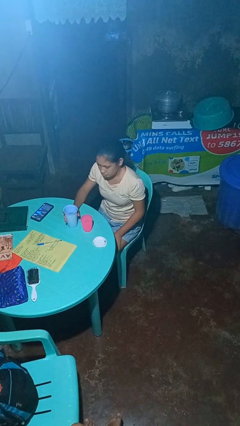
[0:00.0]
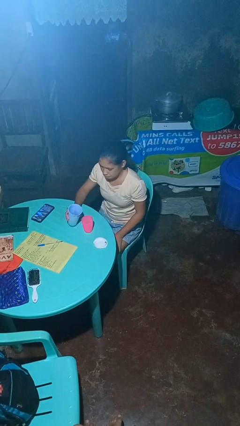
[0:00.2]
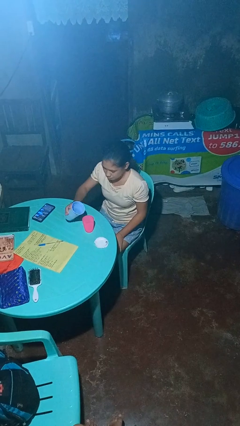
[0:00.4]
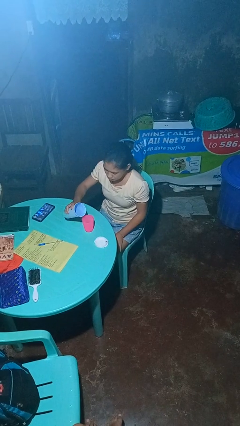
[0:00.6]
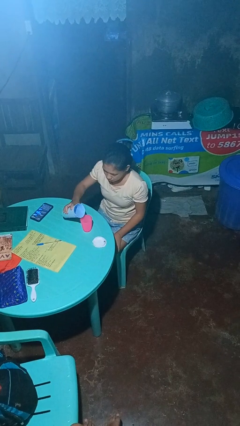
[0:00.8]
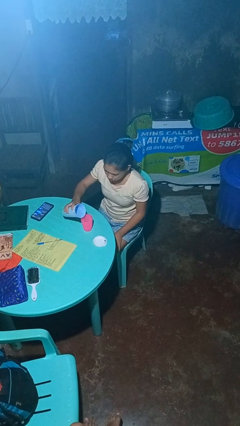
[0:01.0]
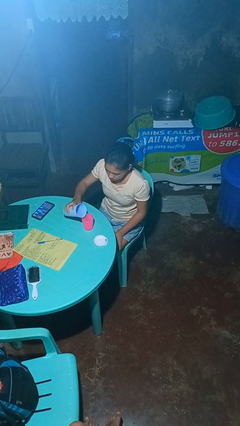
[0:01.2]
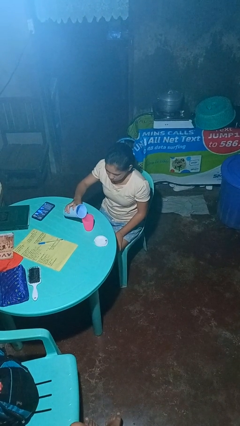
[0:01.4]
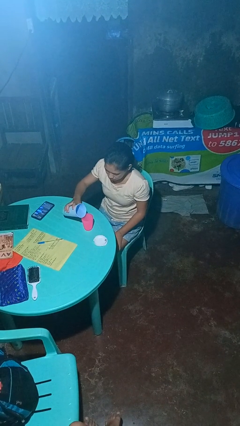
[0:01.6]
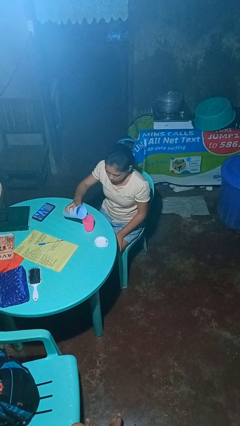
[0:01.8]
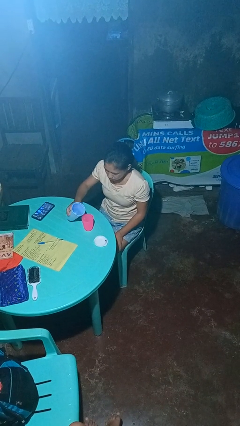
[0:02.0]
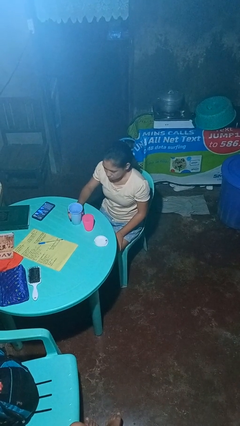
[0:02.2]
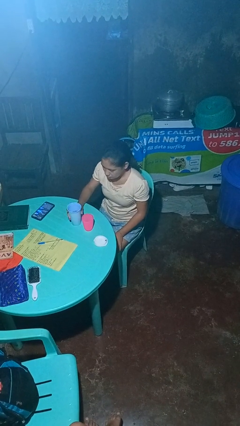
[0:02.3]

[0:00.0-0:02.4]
person pours liquid into cup

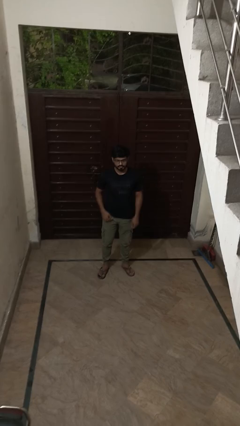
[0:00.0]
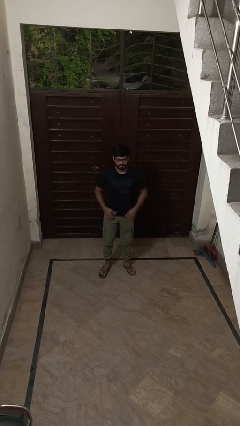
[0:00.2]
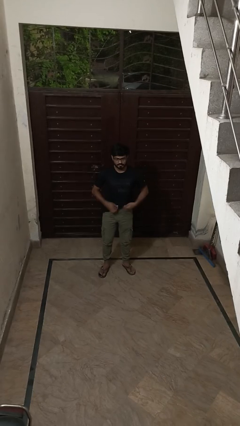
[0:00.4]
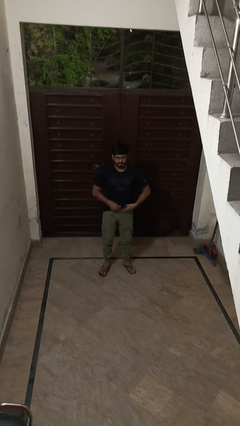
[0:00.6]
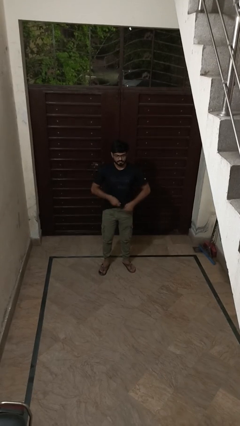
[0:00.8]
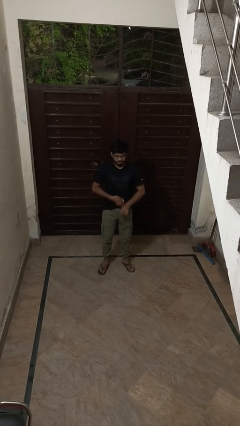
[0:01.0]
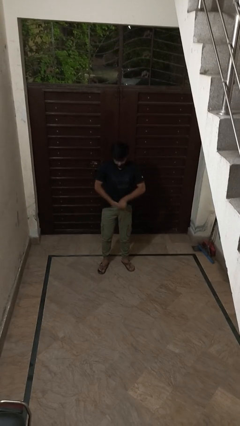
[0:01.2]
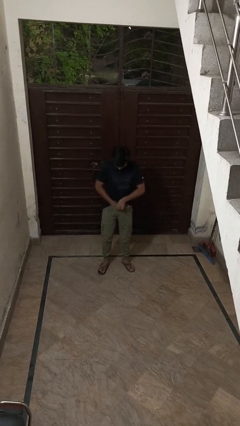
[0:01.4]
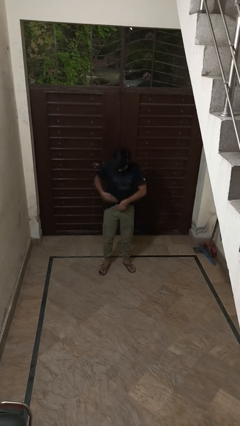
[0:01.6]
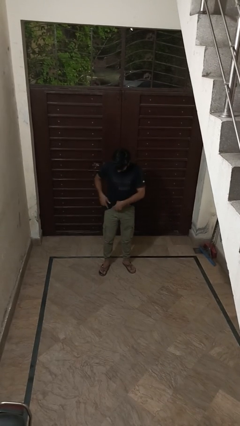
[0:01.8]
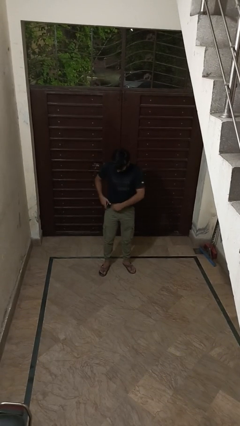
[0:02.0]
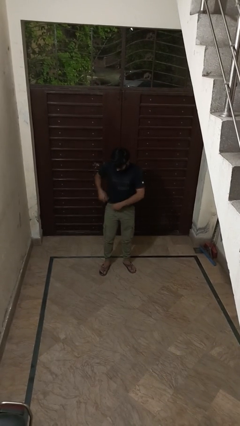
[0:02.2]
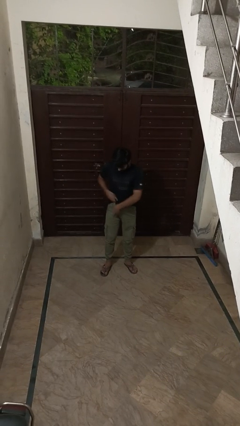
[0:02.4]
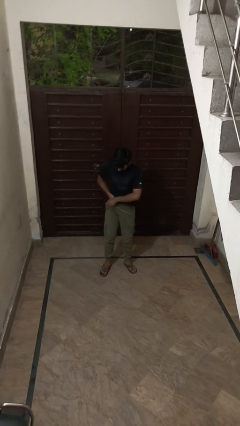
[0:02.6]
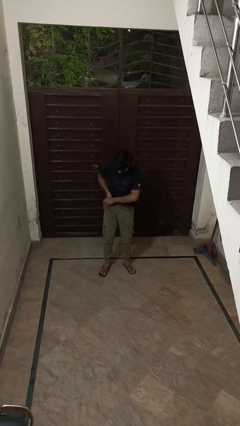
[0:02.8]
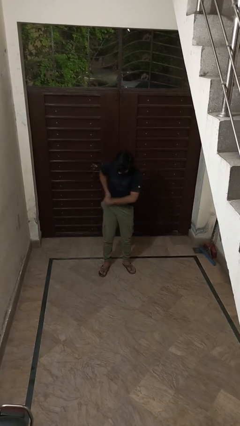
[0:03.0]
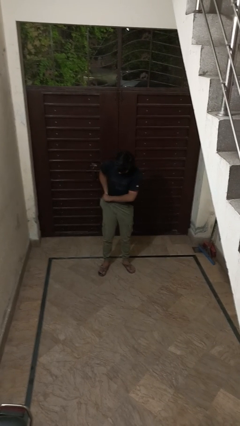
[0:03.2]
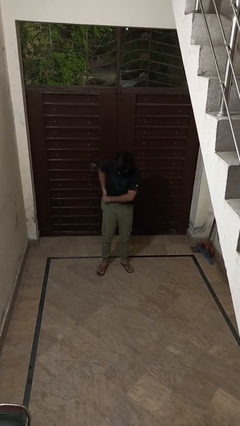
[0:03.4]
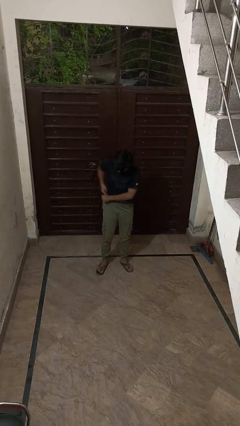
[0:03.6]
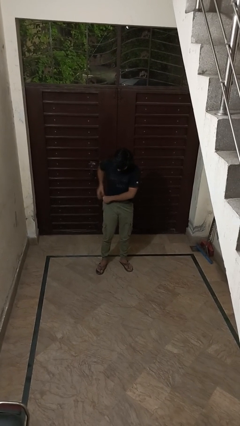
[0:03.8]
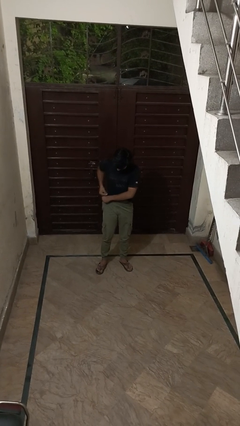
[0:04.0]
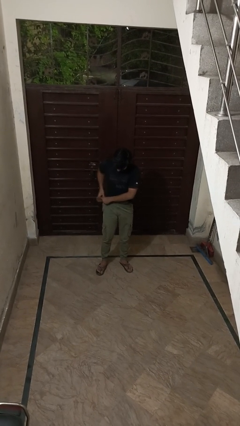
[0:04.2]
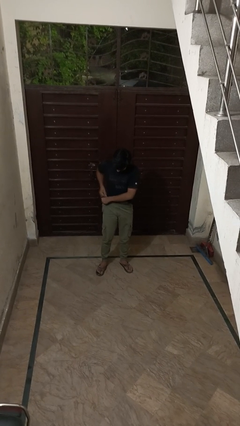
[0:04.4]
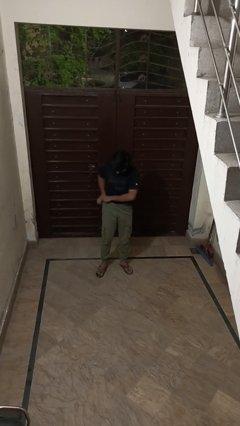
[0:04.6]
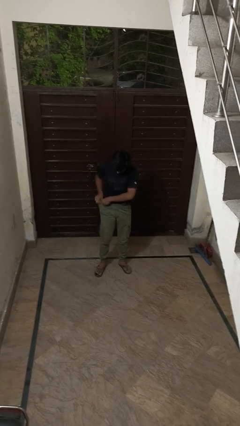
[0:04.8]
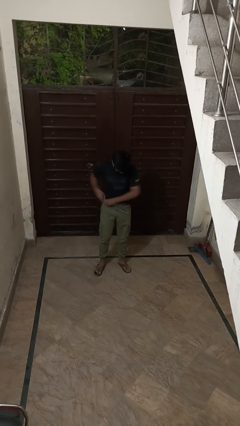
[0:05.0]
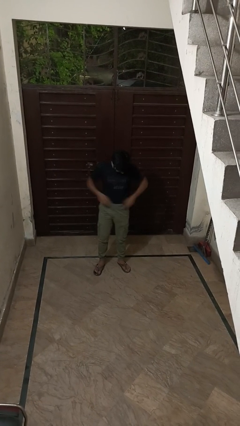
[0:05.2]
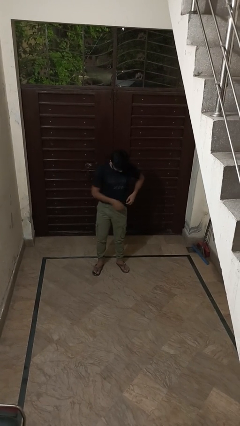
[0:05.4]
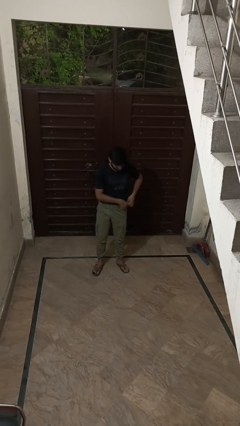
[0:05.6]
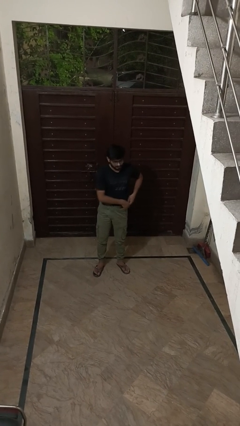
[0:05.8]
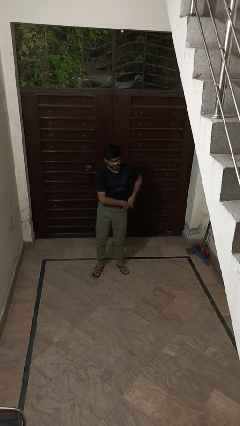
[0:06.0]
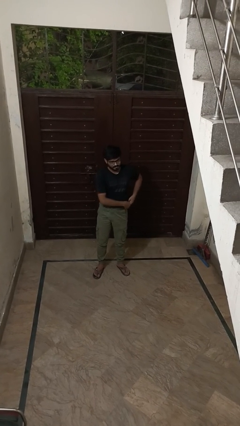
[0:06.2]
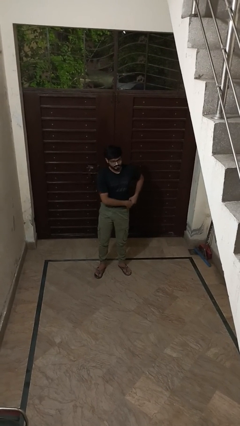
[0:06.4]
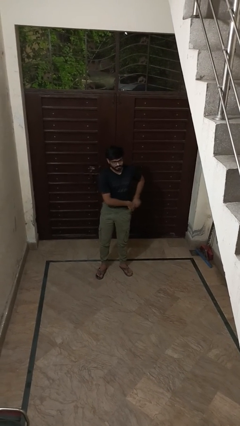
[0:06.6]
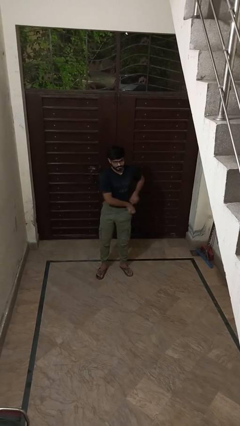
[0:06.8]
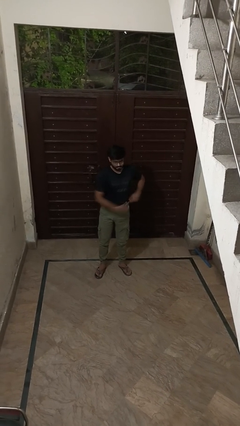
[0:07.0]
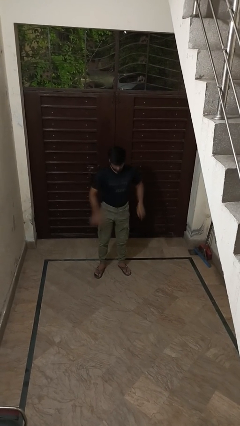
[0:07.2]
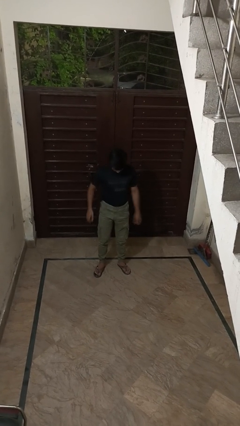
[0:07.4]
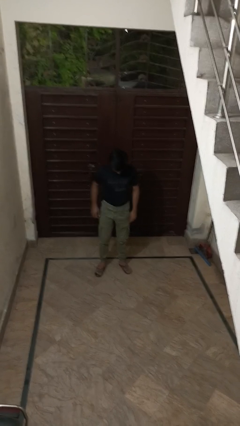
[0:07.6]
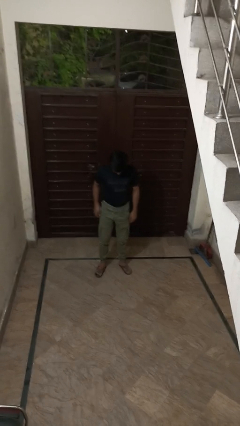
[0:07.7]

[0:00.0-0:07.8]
person tucks in shirt

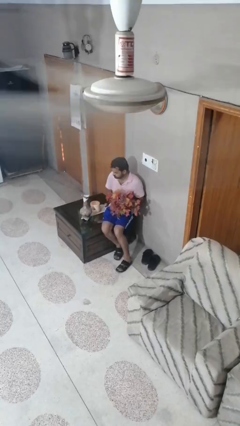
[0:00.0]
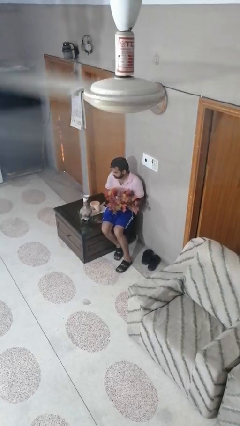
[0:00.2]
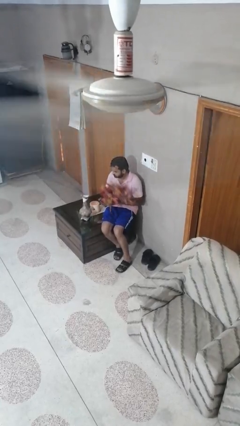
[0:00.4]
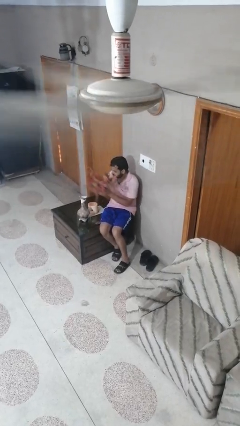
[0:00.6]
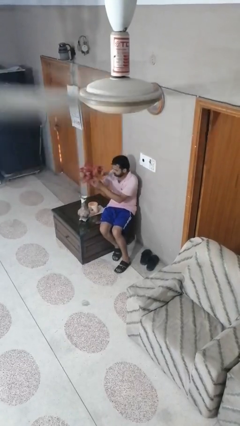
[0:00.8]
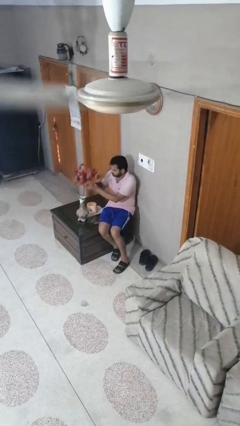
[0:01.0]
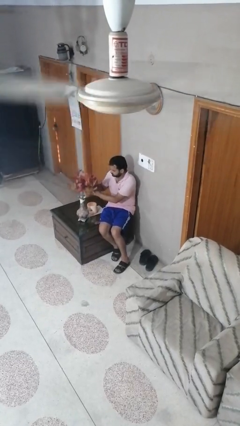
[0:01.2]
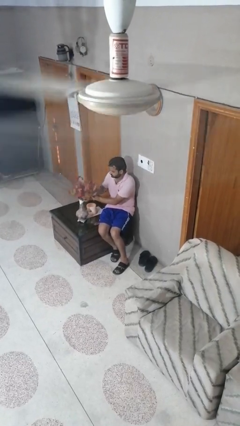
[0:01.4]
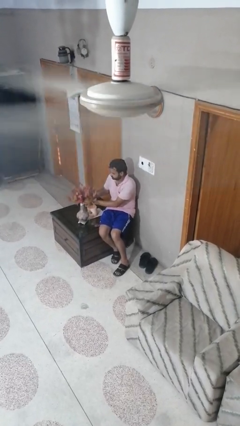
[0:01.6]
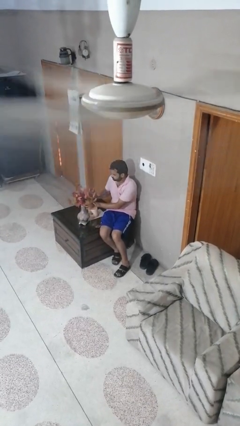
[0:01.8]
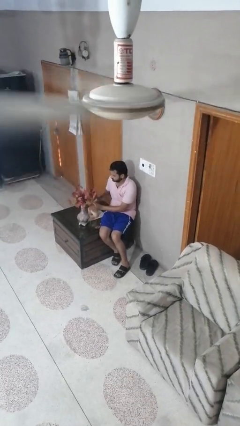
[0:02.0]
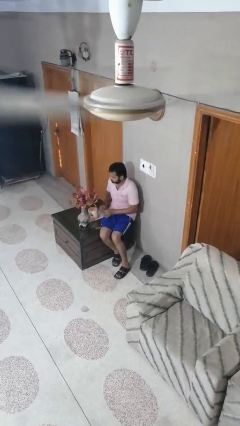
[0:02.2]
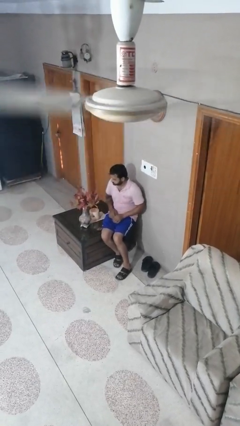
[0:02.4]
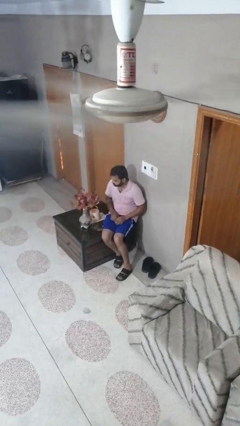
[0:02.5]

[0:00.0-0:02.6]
person arranges flowers in vase

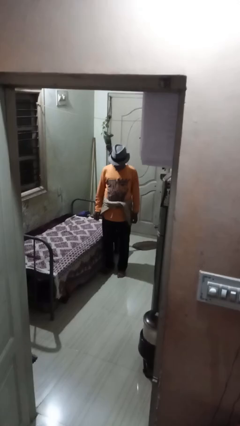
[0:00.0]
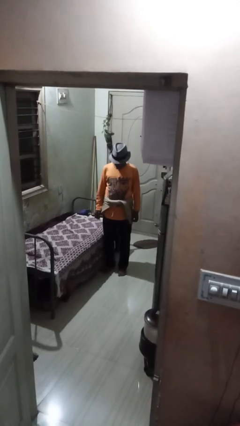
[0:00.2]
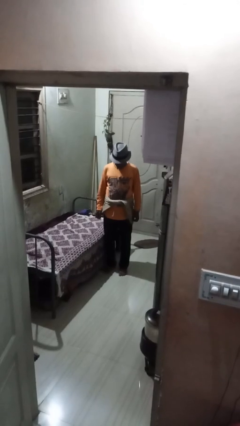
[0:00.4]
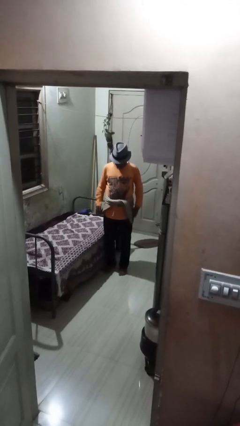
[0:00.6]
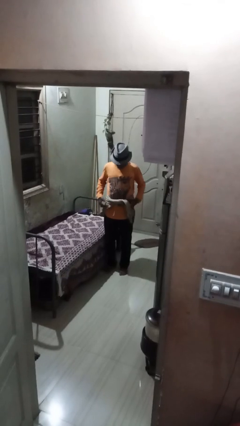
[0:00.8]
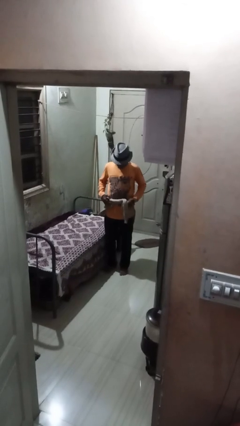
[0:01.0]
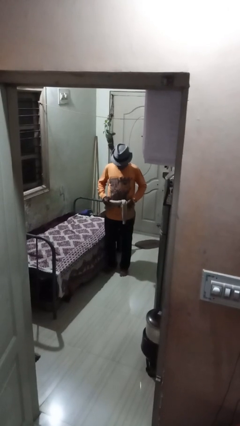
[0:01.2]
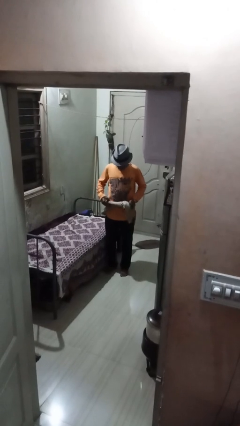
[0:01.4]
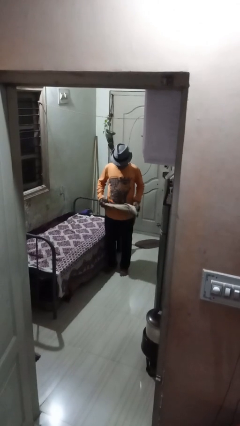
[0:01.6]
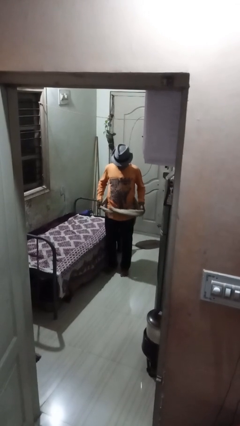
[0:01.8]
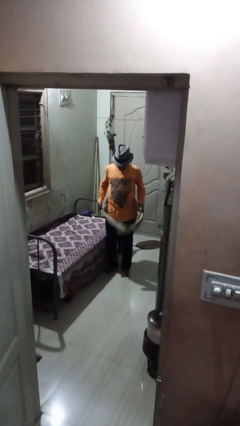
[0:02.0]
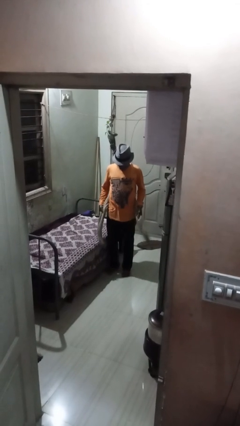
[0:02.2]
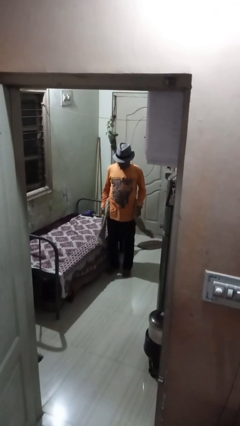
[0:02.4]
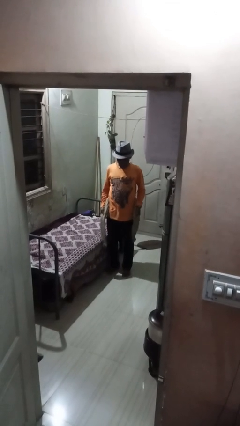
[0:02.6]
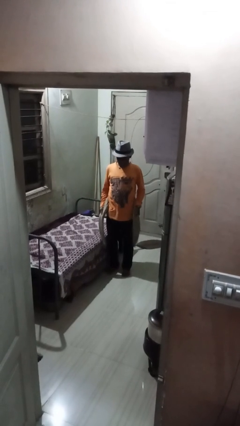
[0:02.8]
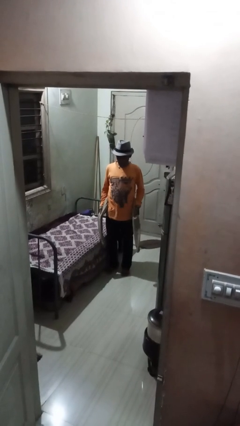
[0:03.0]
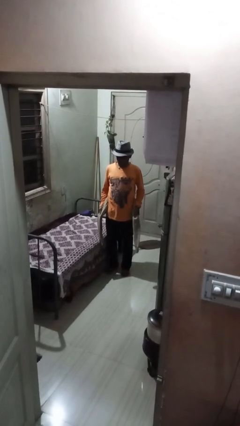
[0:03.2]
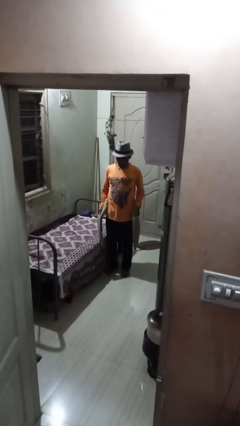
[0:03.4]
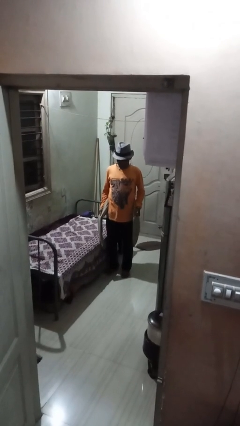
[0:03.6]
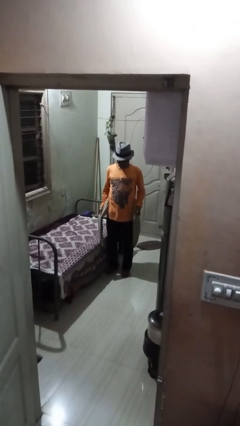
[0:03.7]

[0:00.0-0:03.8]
person unties jacket around waist

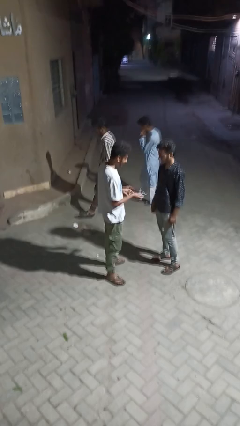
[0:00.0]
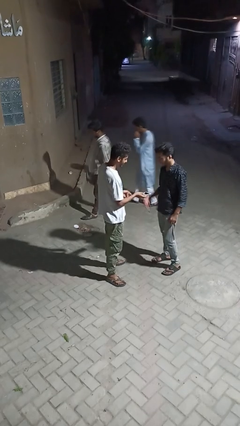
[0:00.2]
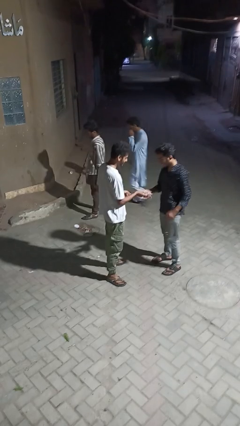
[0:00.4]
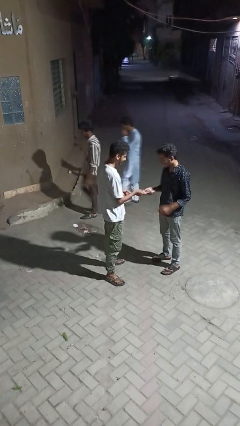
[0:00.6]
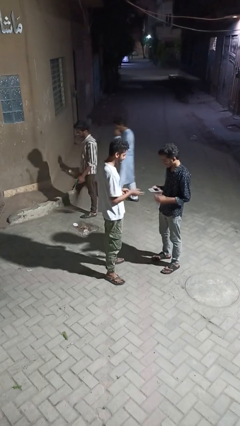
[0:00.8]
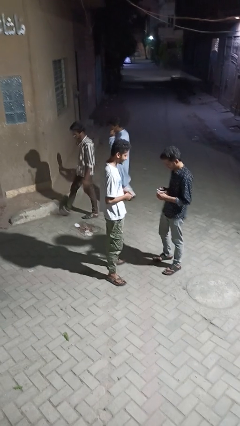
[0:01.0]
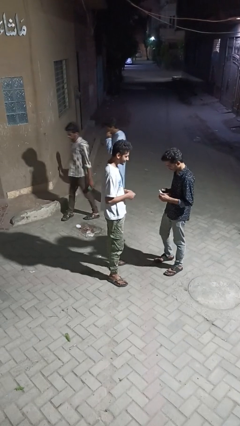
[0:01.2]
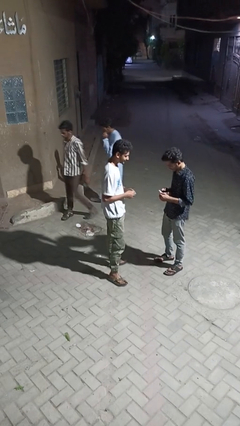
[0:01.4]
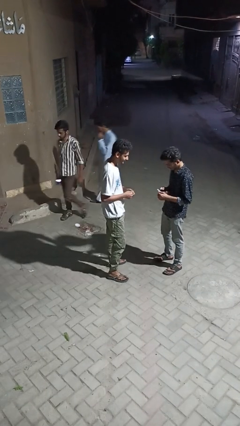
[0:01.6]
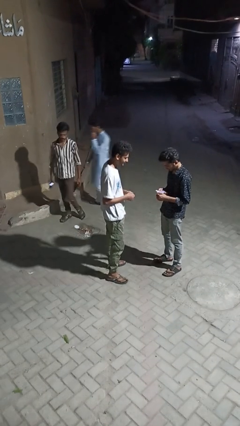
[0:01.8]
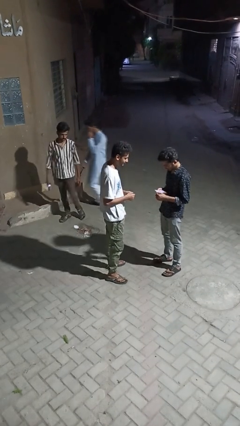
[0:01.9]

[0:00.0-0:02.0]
person transfers object to person
